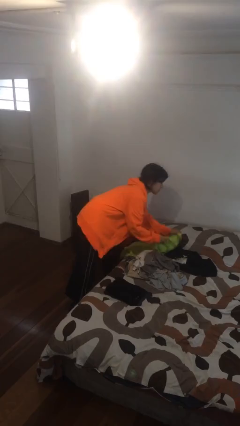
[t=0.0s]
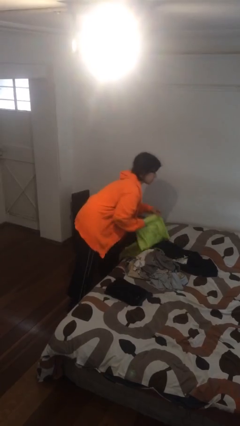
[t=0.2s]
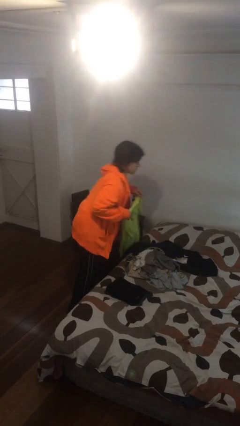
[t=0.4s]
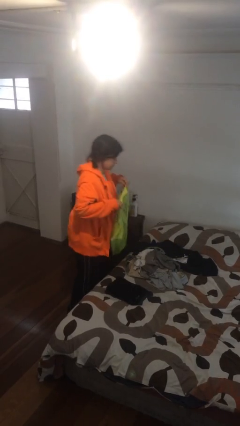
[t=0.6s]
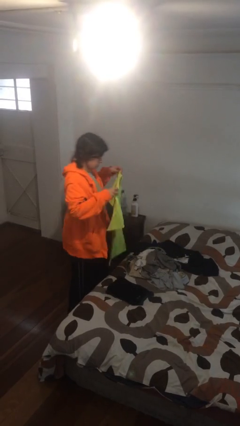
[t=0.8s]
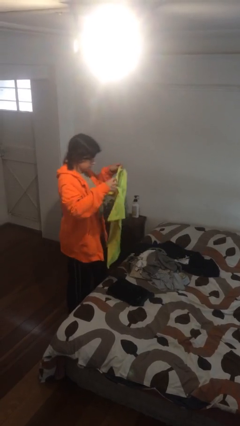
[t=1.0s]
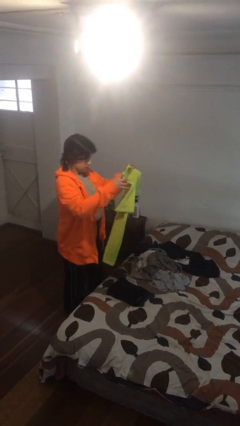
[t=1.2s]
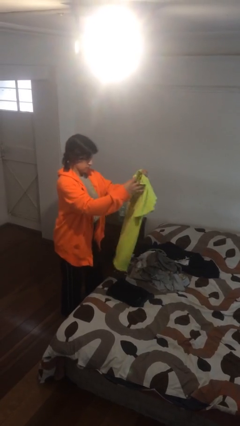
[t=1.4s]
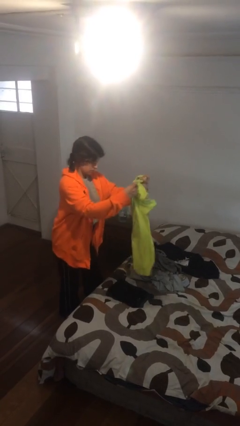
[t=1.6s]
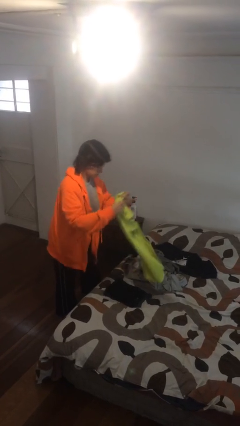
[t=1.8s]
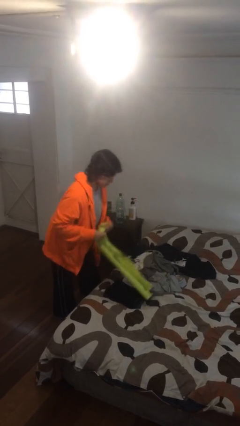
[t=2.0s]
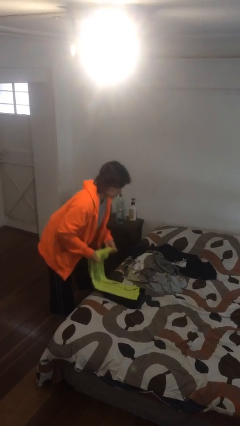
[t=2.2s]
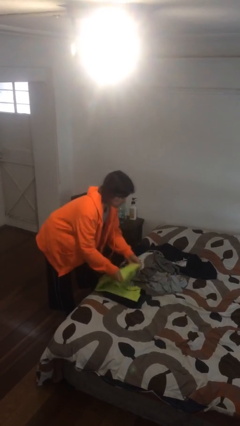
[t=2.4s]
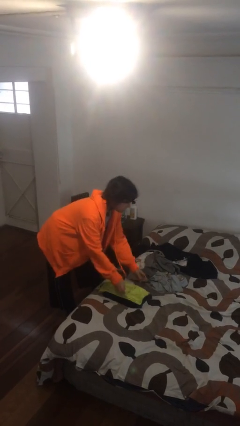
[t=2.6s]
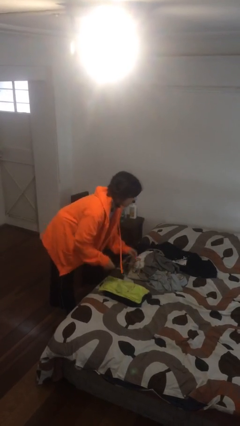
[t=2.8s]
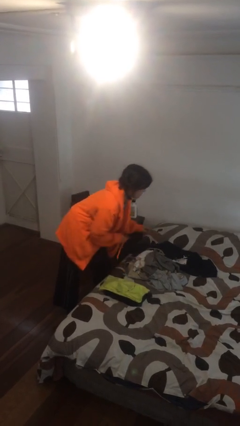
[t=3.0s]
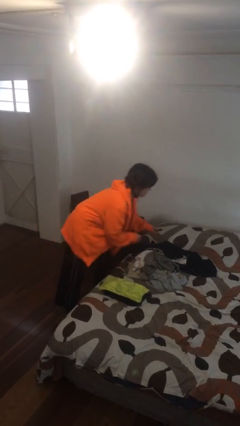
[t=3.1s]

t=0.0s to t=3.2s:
person folds shirt

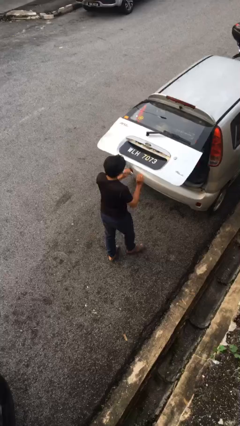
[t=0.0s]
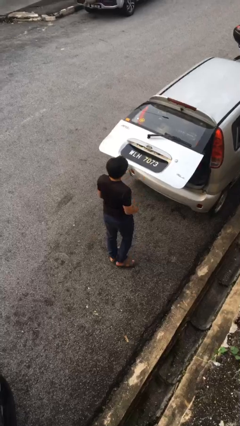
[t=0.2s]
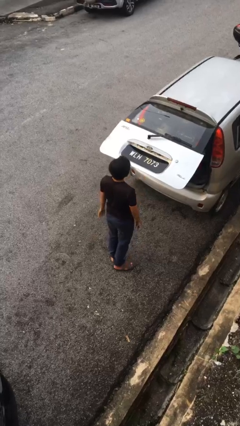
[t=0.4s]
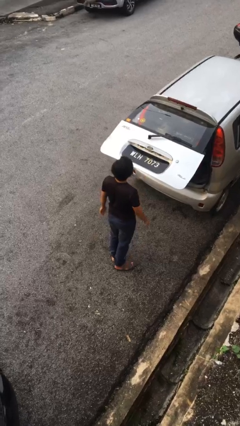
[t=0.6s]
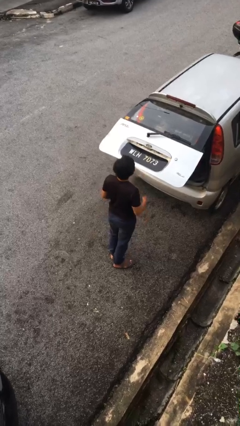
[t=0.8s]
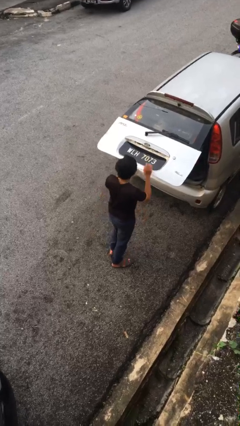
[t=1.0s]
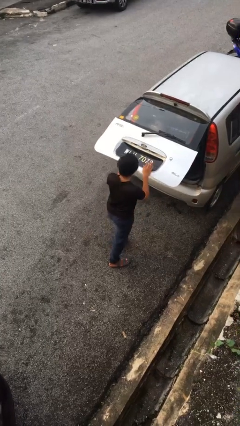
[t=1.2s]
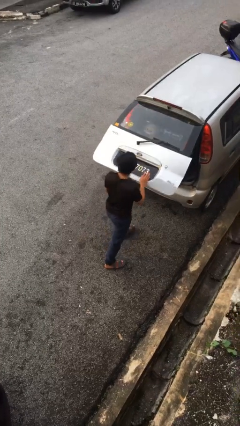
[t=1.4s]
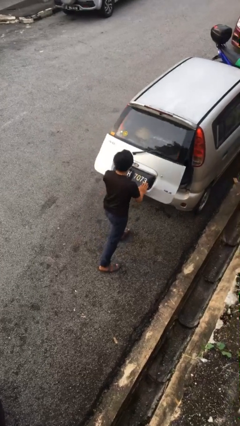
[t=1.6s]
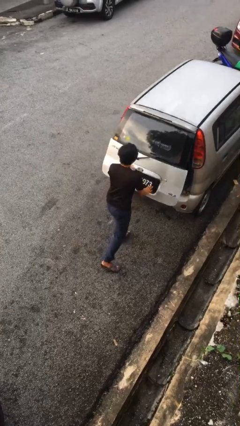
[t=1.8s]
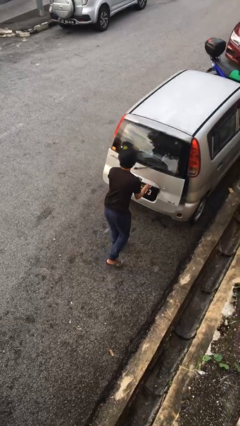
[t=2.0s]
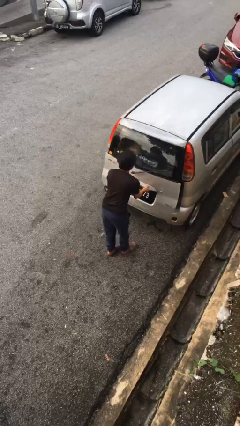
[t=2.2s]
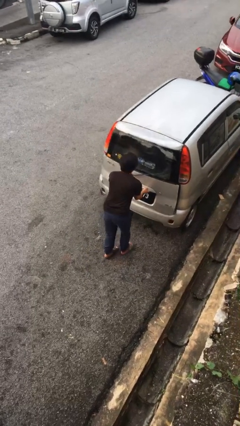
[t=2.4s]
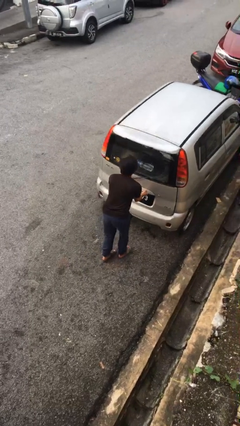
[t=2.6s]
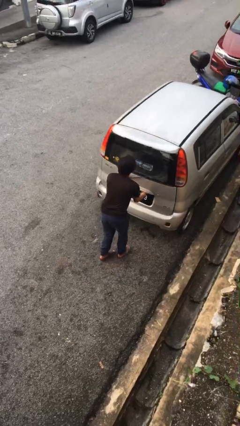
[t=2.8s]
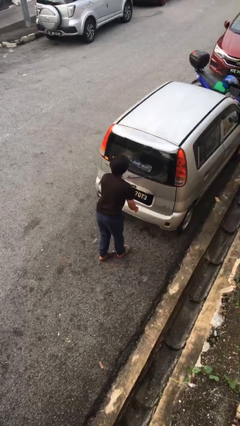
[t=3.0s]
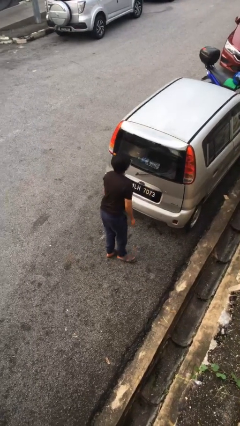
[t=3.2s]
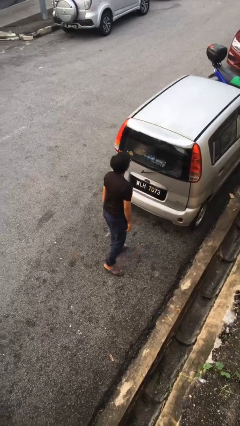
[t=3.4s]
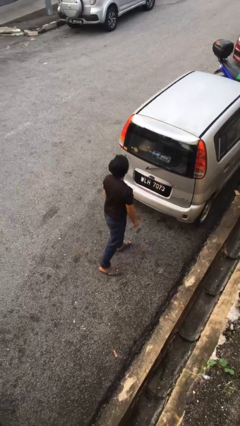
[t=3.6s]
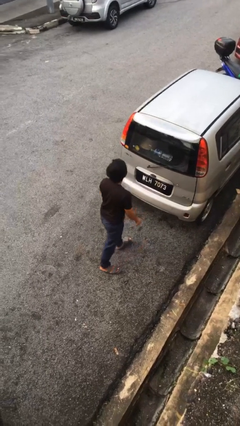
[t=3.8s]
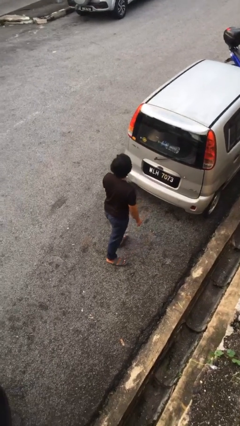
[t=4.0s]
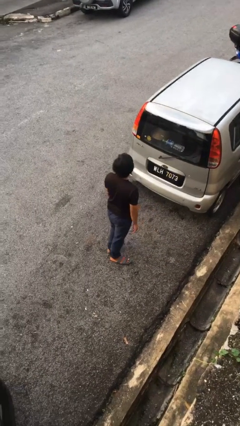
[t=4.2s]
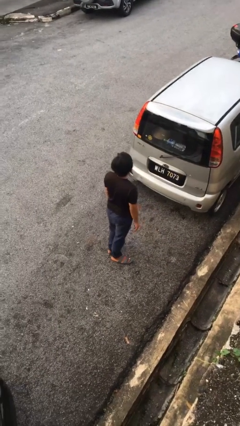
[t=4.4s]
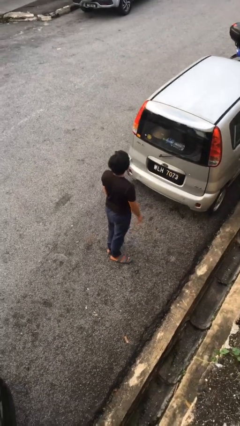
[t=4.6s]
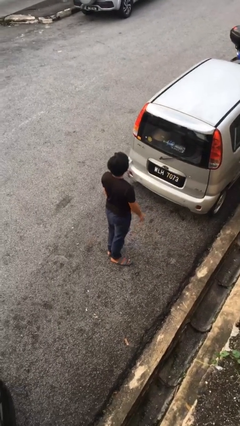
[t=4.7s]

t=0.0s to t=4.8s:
person closes car trunk

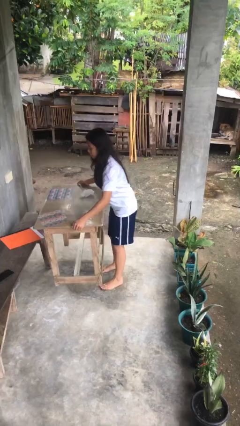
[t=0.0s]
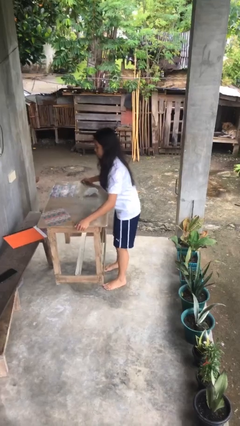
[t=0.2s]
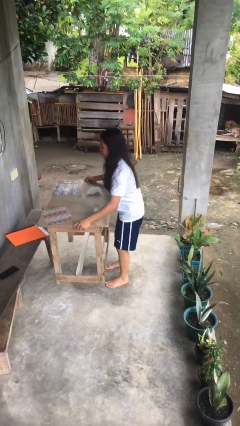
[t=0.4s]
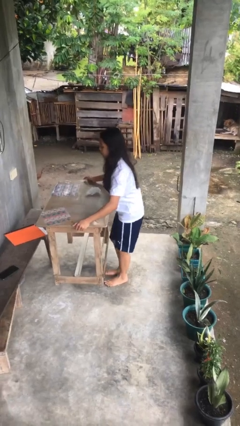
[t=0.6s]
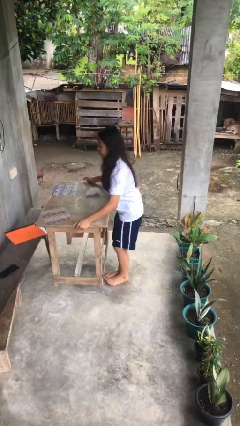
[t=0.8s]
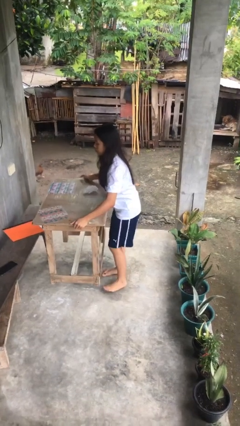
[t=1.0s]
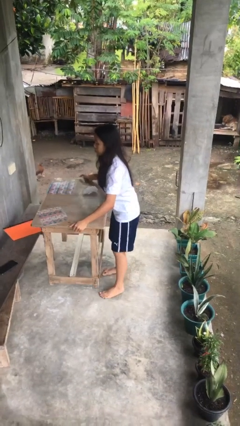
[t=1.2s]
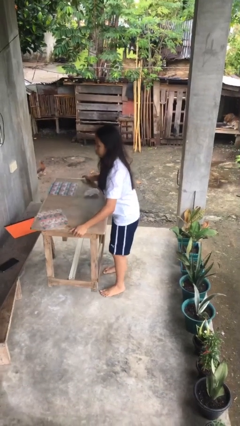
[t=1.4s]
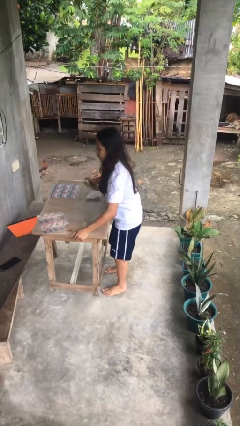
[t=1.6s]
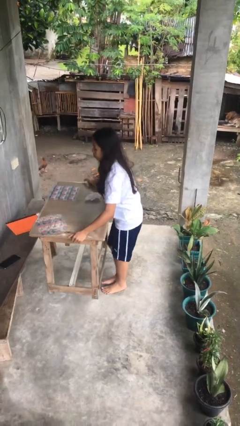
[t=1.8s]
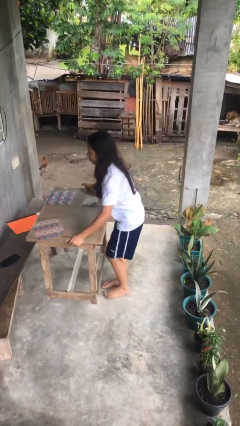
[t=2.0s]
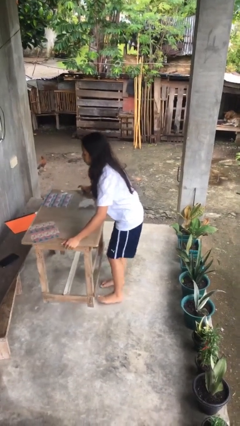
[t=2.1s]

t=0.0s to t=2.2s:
person carries heavy object

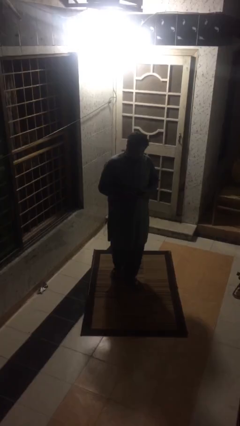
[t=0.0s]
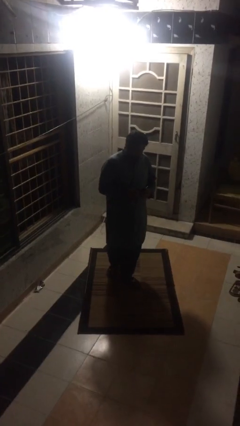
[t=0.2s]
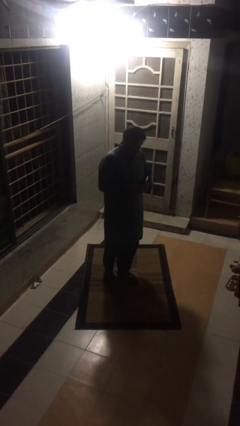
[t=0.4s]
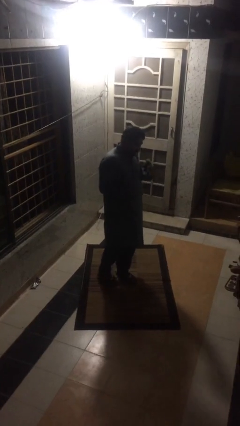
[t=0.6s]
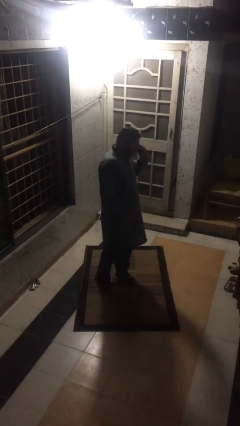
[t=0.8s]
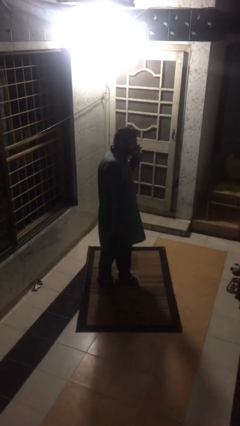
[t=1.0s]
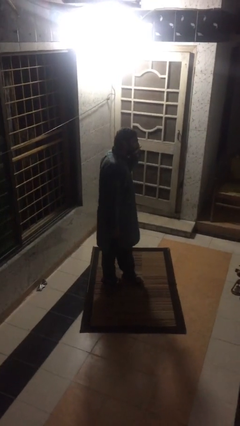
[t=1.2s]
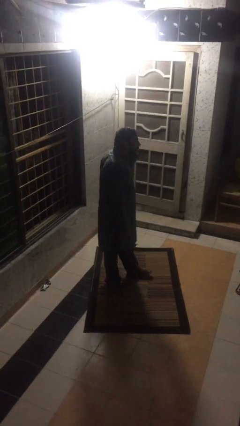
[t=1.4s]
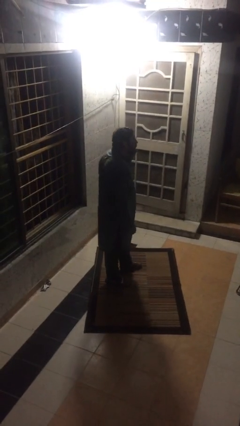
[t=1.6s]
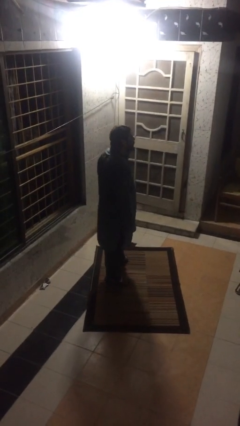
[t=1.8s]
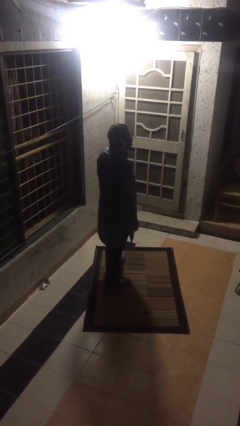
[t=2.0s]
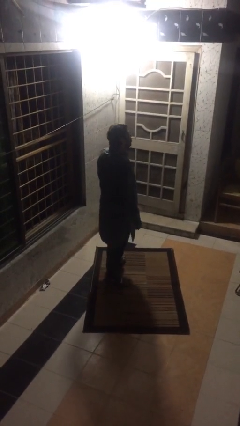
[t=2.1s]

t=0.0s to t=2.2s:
person talks on phone

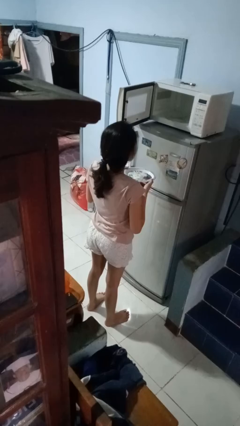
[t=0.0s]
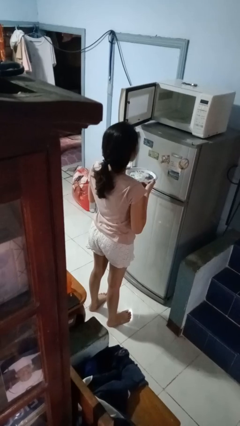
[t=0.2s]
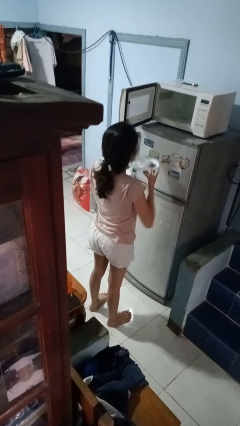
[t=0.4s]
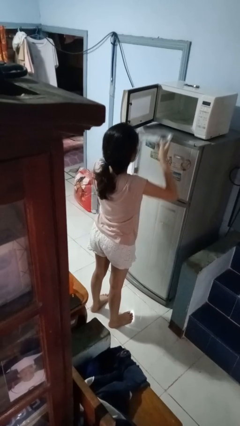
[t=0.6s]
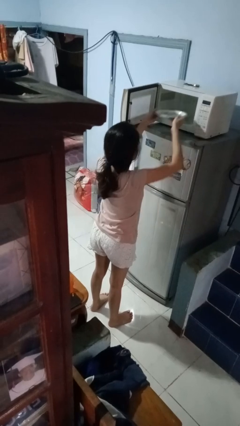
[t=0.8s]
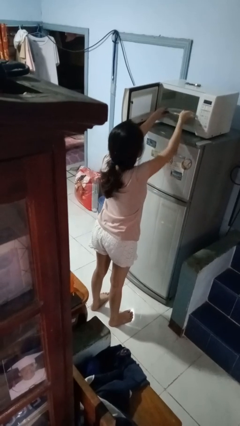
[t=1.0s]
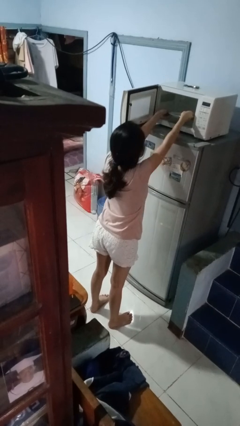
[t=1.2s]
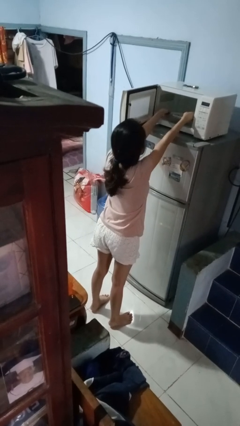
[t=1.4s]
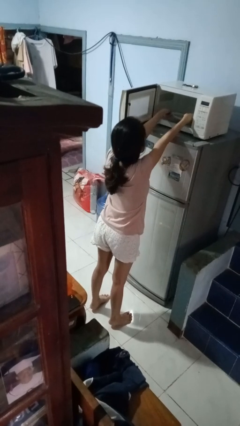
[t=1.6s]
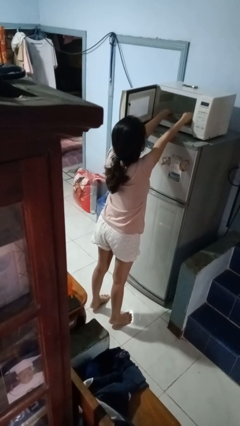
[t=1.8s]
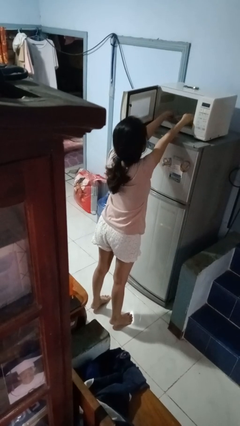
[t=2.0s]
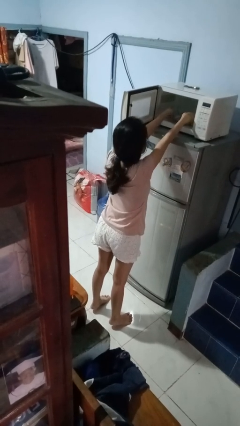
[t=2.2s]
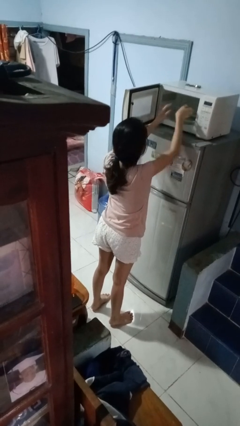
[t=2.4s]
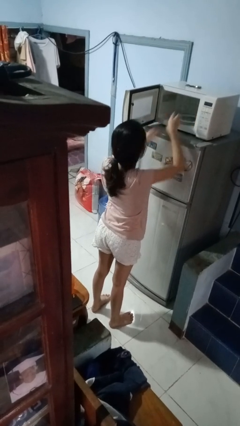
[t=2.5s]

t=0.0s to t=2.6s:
person puts object into microwave

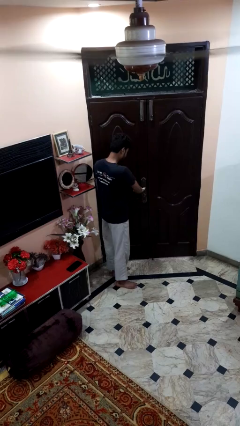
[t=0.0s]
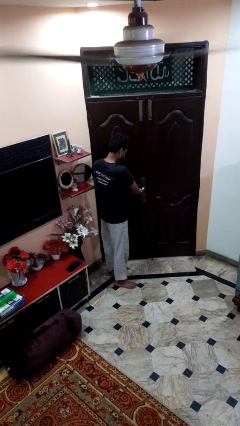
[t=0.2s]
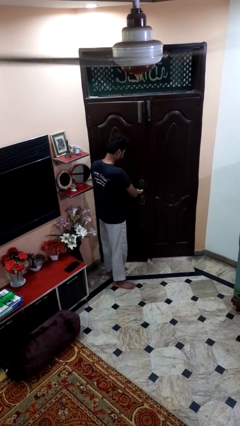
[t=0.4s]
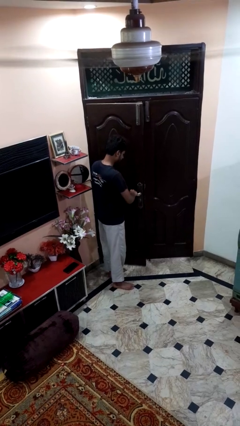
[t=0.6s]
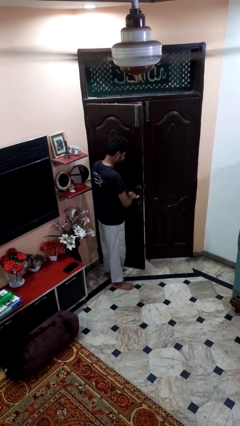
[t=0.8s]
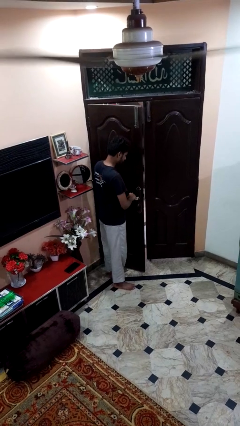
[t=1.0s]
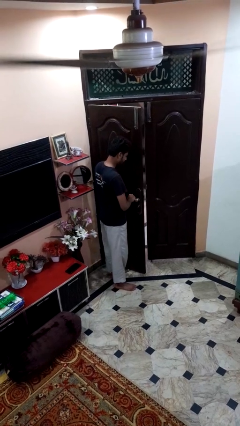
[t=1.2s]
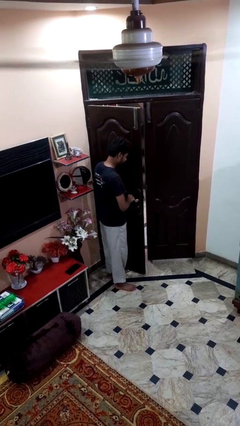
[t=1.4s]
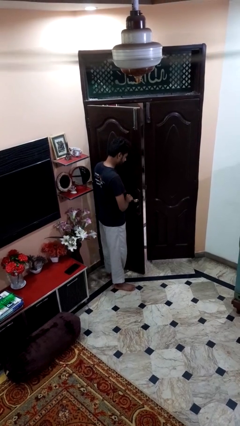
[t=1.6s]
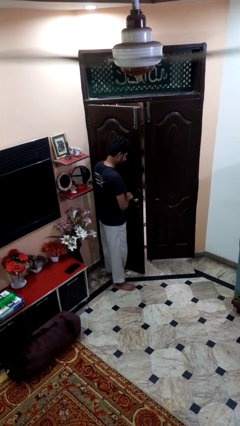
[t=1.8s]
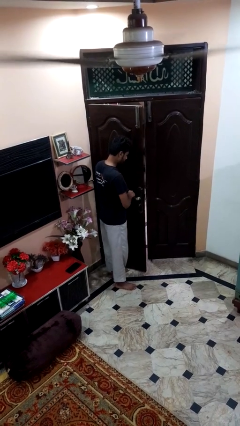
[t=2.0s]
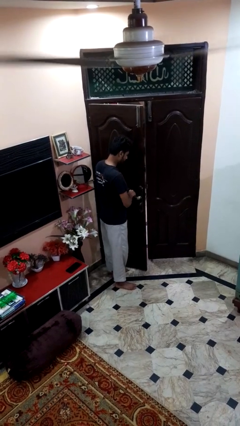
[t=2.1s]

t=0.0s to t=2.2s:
person opens facility door
